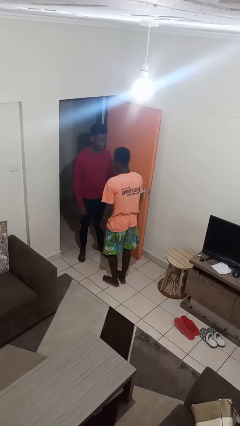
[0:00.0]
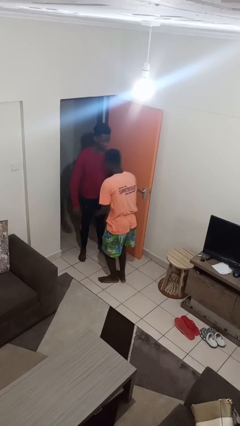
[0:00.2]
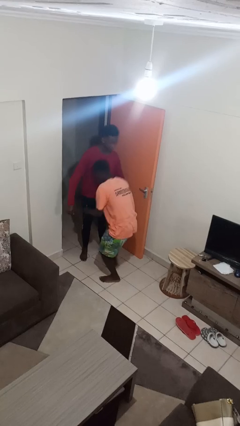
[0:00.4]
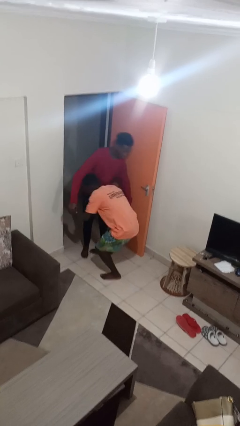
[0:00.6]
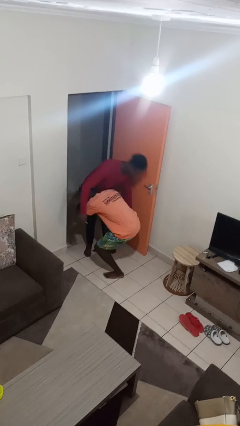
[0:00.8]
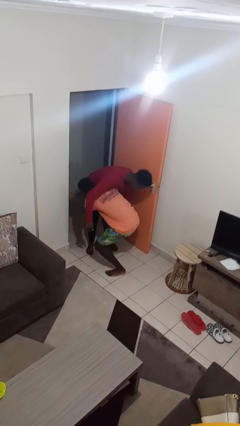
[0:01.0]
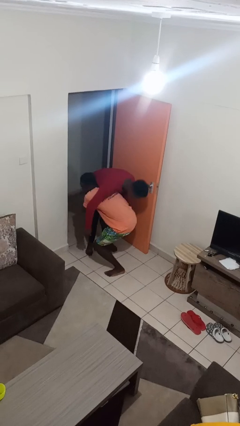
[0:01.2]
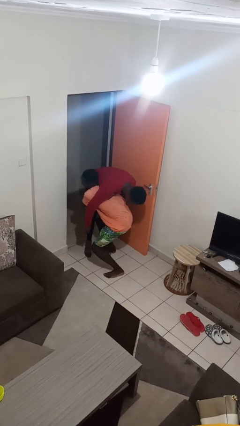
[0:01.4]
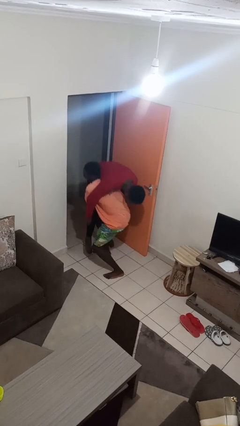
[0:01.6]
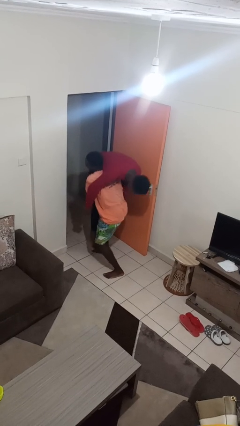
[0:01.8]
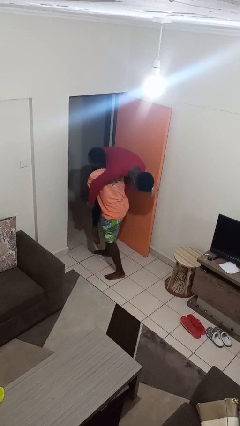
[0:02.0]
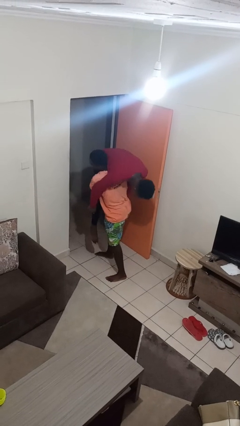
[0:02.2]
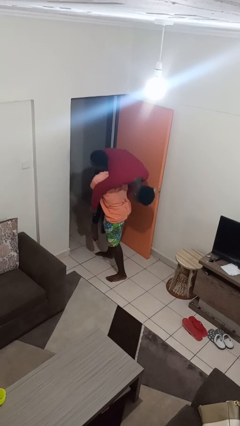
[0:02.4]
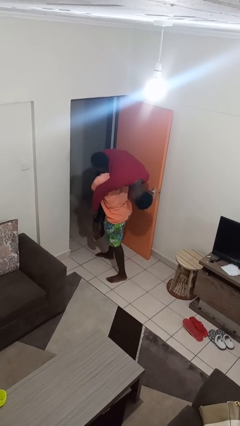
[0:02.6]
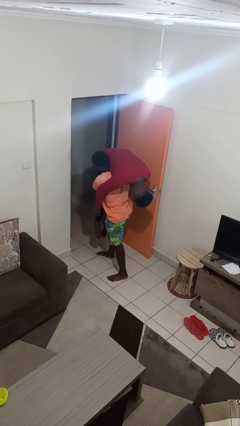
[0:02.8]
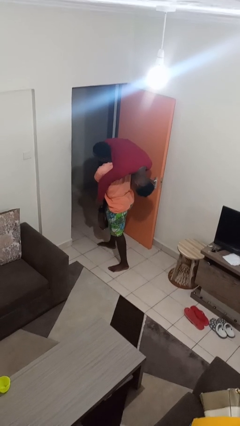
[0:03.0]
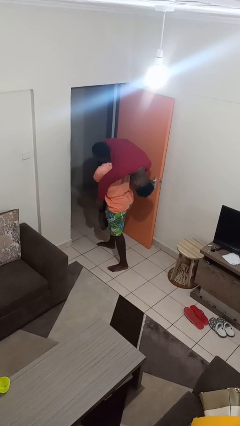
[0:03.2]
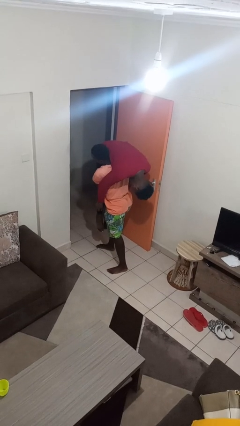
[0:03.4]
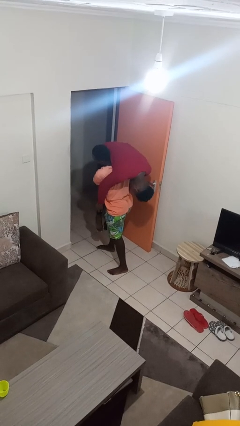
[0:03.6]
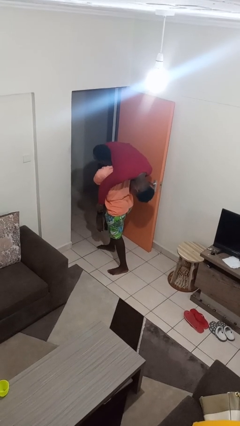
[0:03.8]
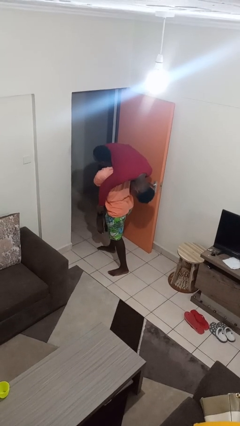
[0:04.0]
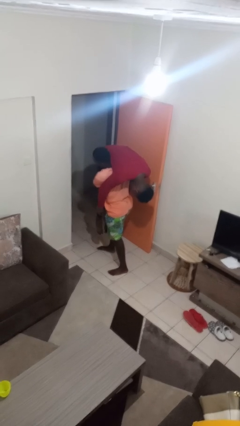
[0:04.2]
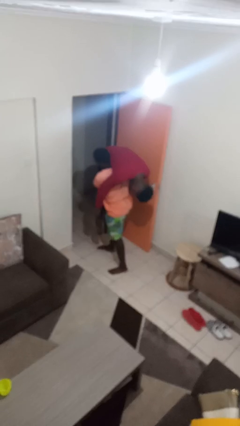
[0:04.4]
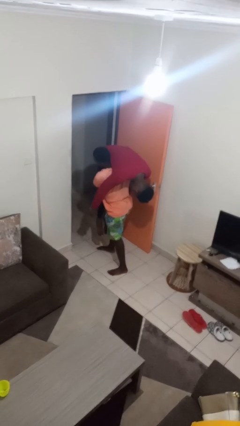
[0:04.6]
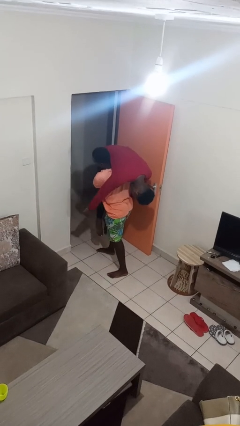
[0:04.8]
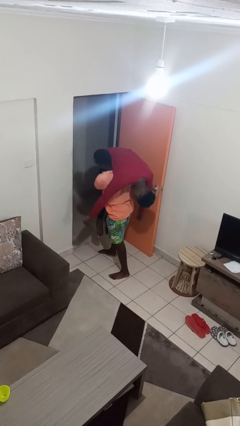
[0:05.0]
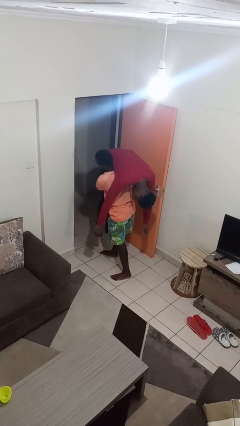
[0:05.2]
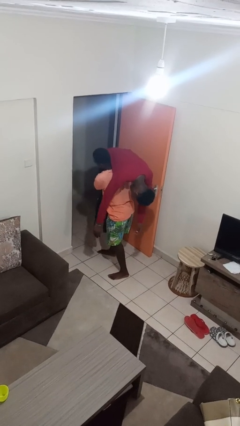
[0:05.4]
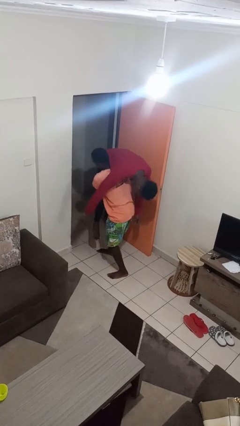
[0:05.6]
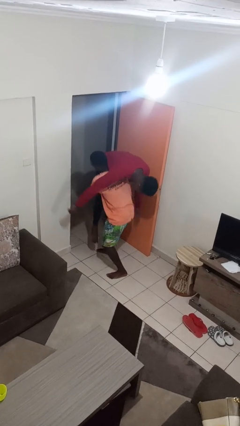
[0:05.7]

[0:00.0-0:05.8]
person carries person over shoulder

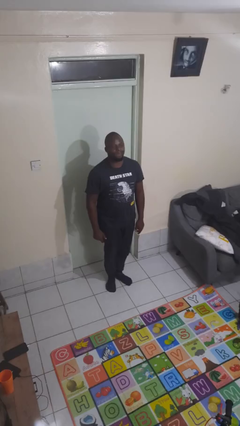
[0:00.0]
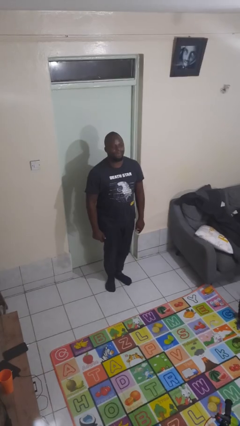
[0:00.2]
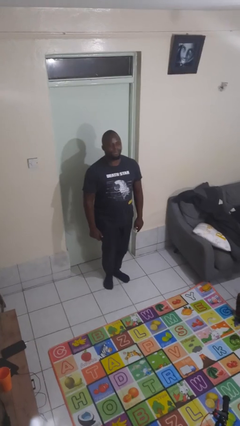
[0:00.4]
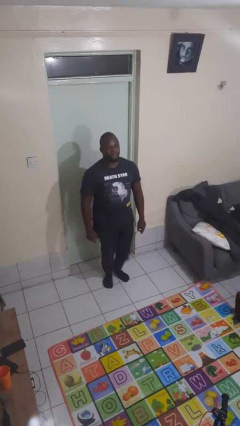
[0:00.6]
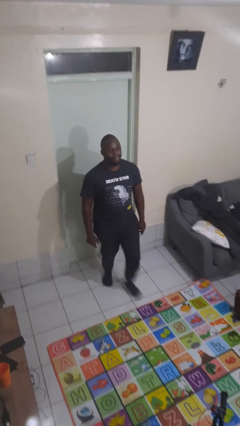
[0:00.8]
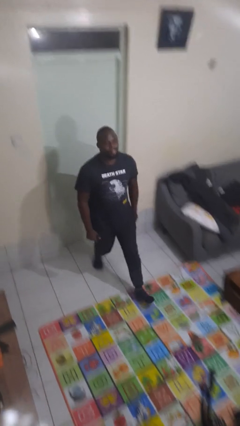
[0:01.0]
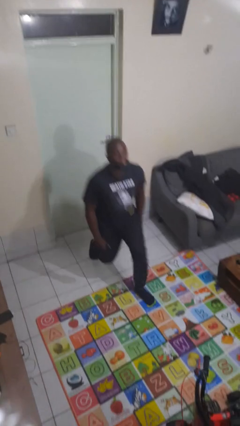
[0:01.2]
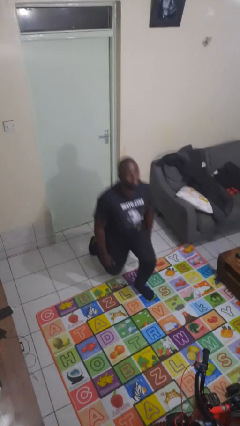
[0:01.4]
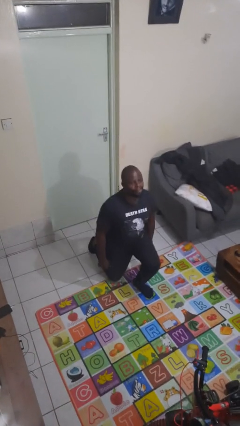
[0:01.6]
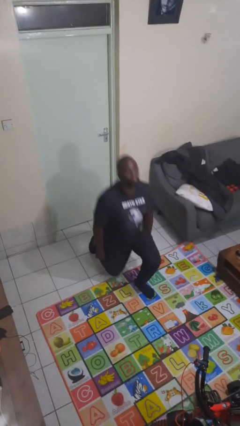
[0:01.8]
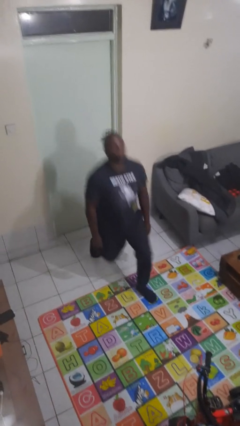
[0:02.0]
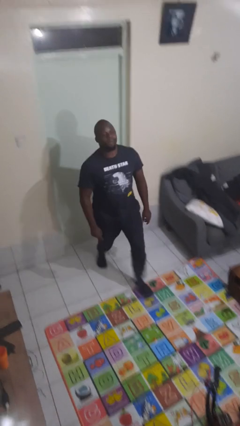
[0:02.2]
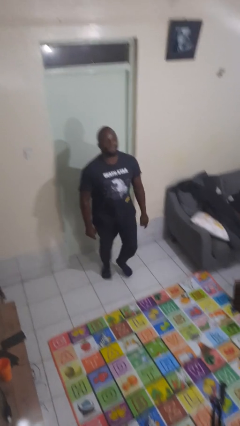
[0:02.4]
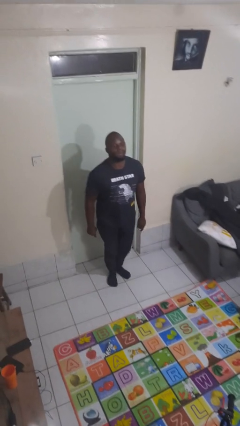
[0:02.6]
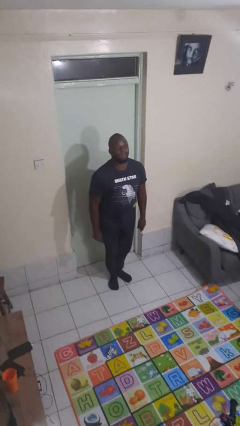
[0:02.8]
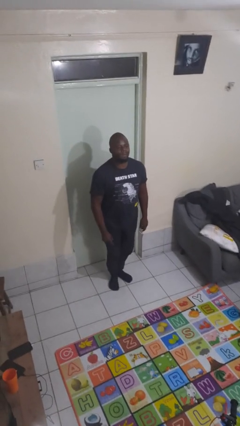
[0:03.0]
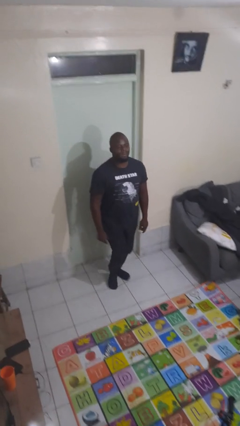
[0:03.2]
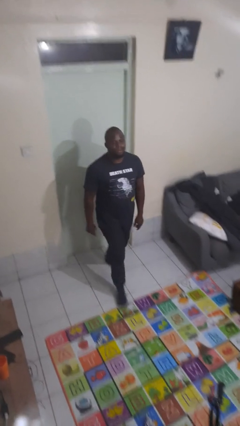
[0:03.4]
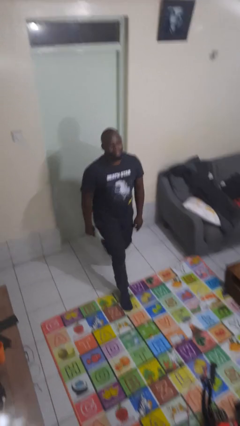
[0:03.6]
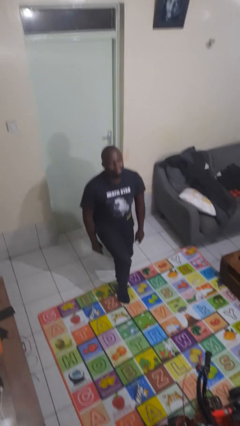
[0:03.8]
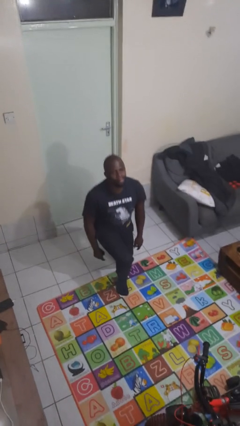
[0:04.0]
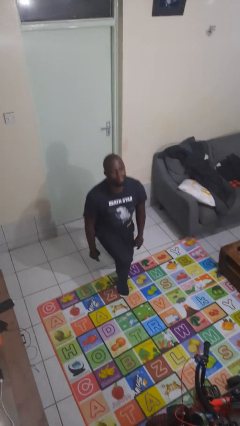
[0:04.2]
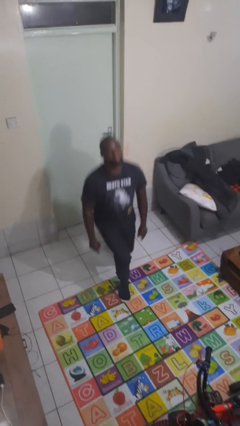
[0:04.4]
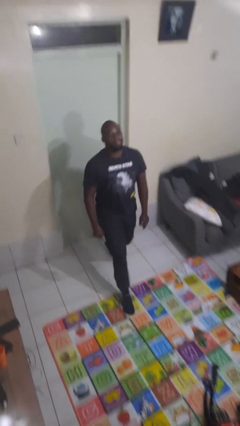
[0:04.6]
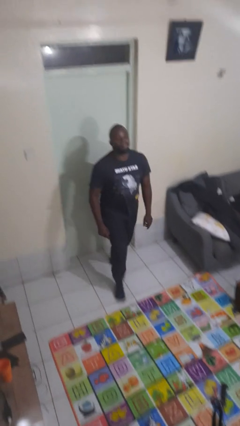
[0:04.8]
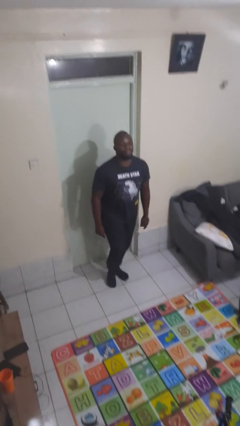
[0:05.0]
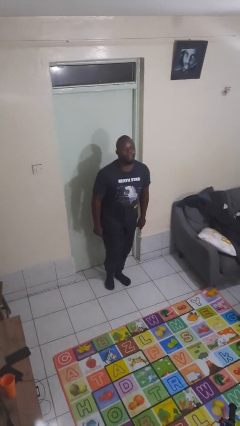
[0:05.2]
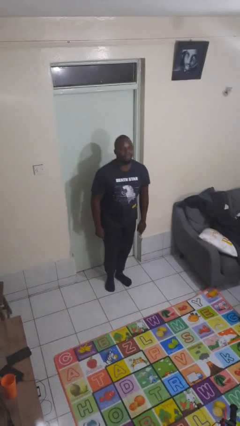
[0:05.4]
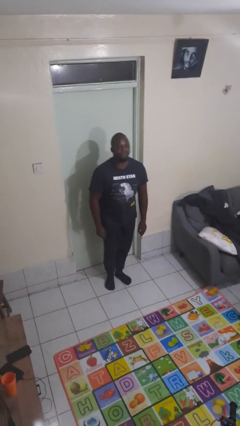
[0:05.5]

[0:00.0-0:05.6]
person exercises with lunges

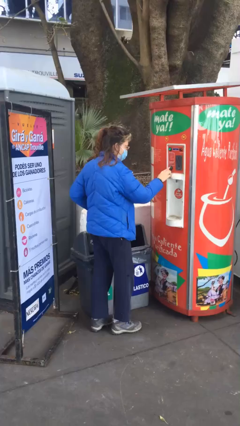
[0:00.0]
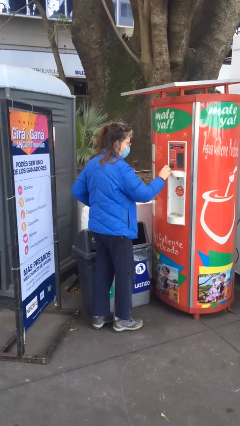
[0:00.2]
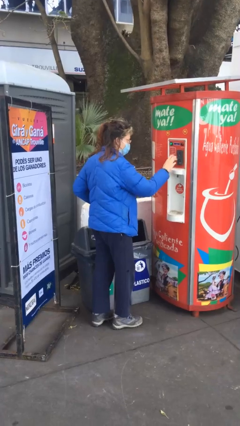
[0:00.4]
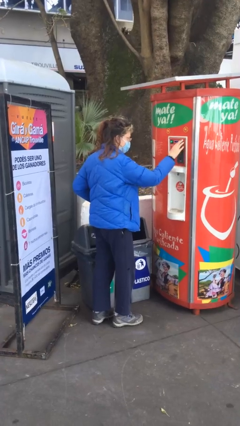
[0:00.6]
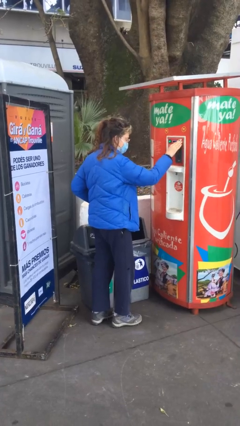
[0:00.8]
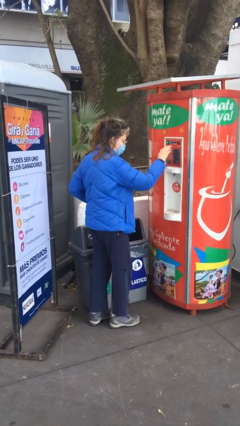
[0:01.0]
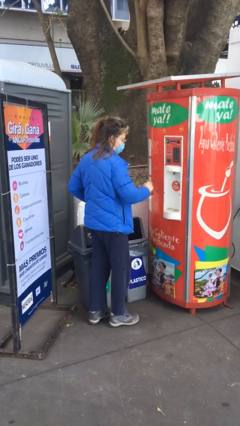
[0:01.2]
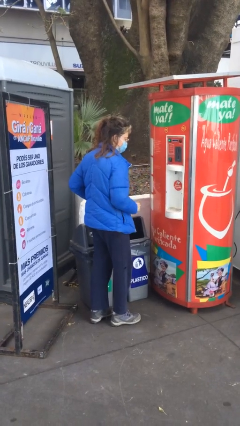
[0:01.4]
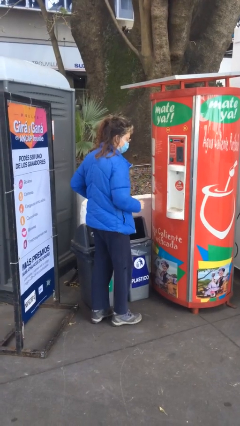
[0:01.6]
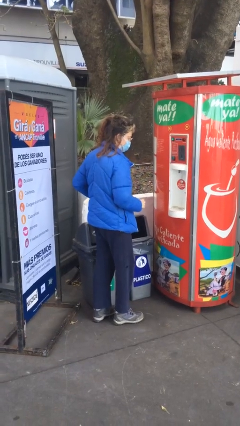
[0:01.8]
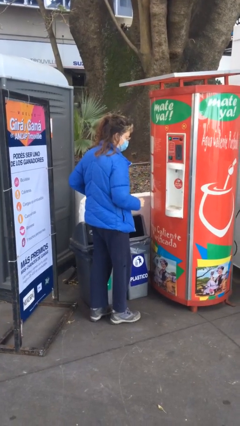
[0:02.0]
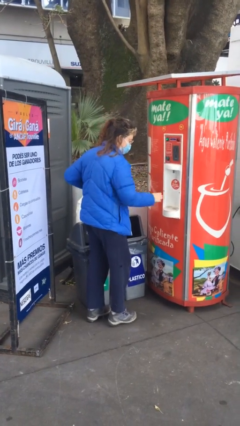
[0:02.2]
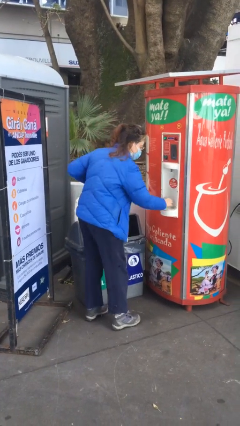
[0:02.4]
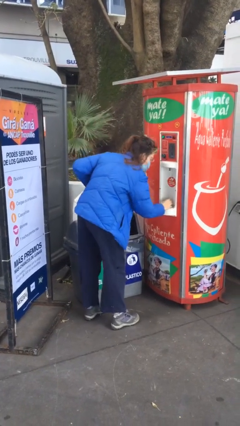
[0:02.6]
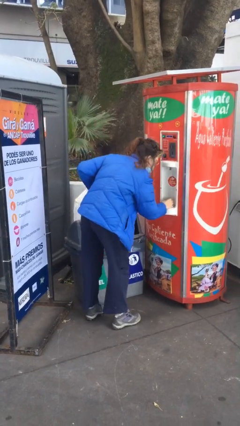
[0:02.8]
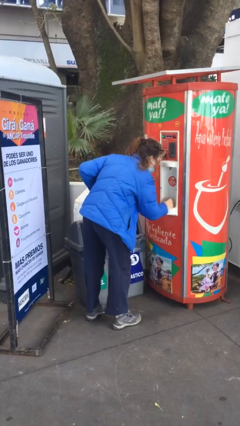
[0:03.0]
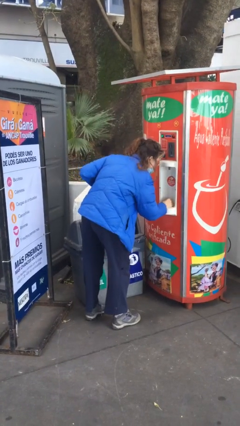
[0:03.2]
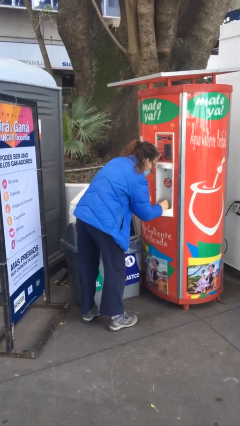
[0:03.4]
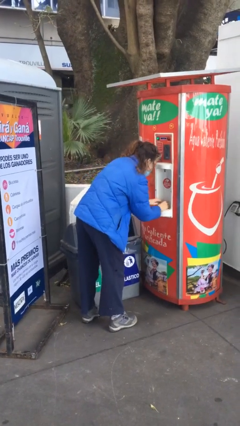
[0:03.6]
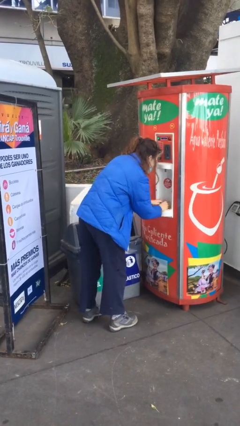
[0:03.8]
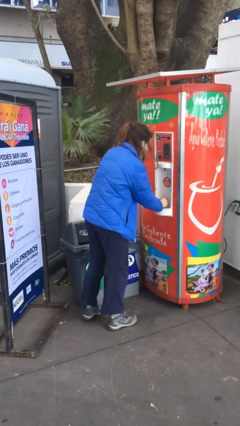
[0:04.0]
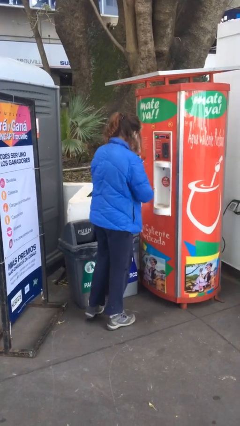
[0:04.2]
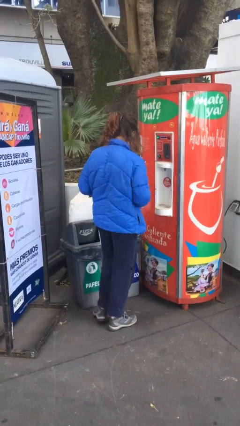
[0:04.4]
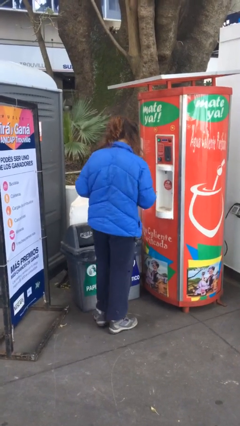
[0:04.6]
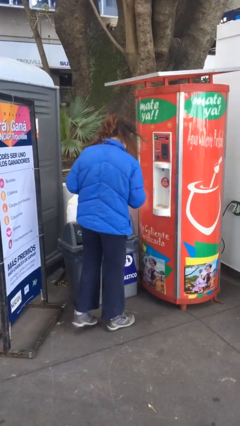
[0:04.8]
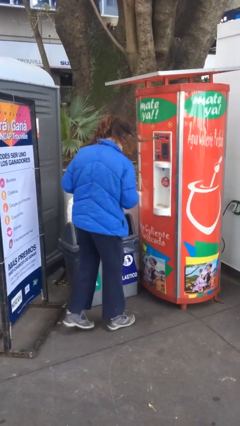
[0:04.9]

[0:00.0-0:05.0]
person purchases from machine

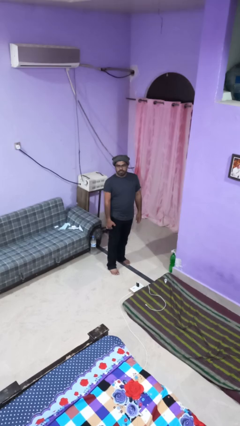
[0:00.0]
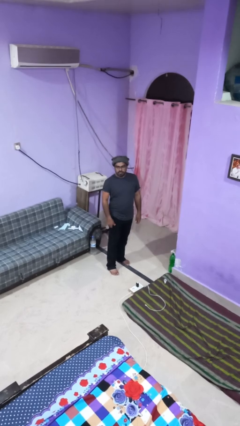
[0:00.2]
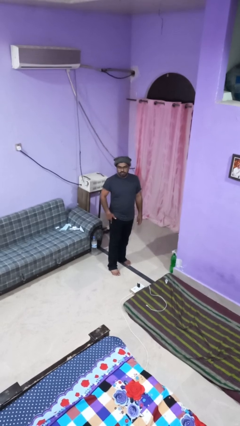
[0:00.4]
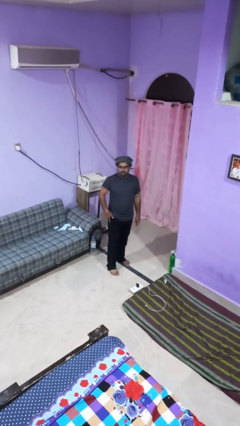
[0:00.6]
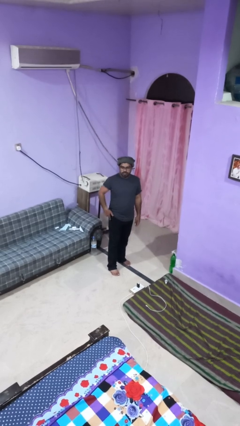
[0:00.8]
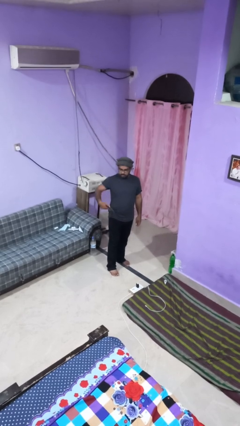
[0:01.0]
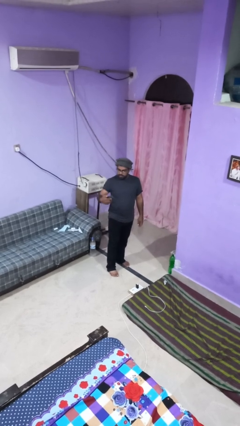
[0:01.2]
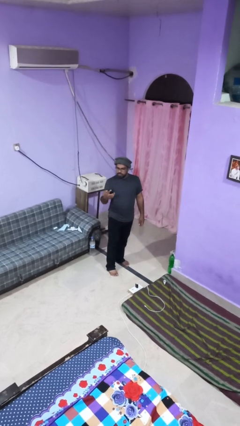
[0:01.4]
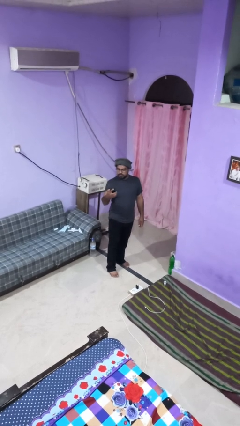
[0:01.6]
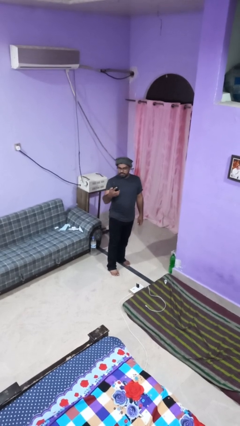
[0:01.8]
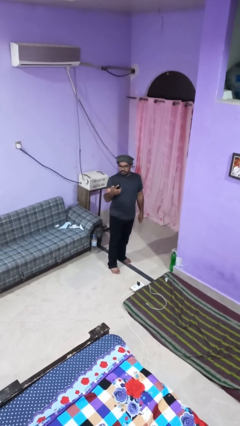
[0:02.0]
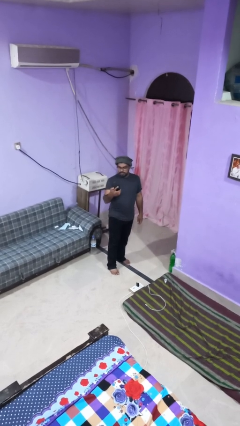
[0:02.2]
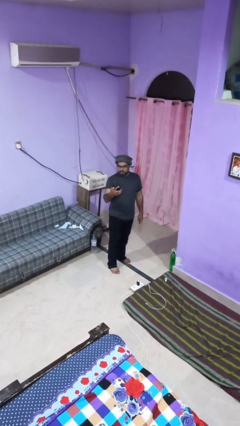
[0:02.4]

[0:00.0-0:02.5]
person takes phone from pocket
